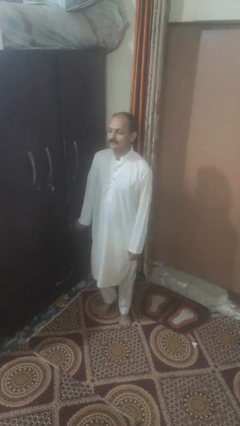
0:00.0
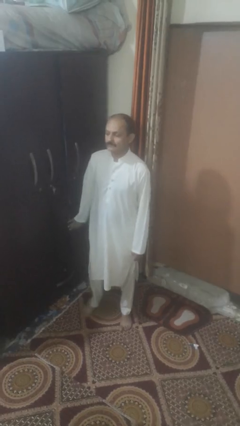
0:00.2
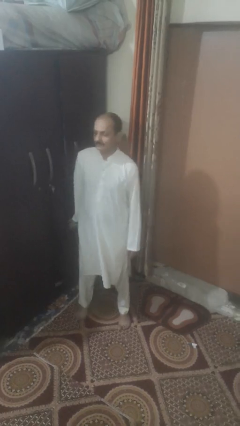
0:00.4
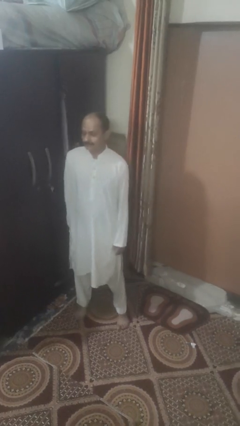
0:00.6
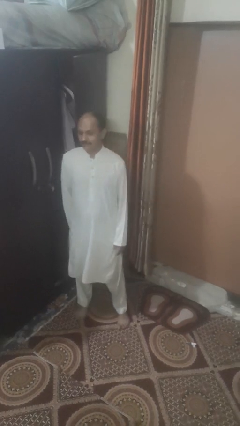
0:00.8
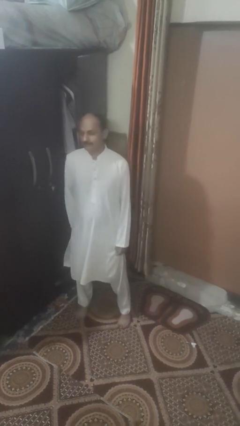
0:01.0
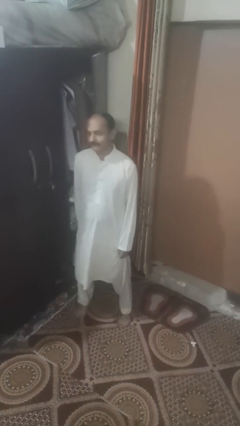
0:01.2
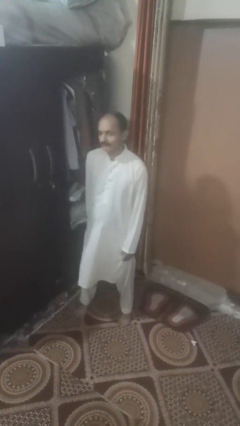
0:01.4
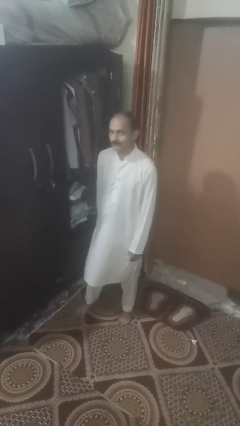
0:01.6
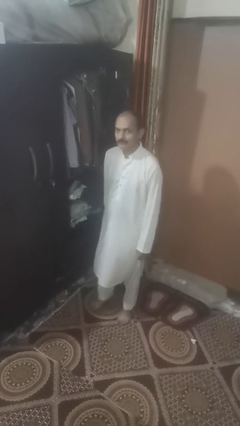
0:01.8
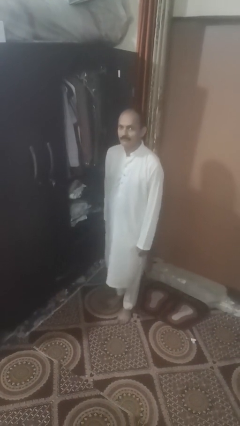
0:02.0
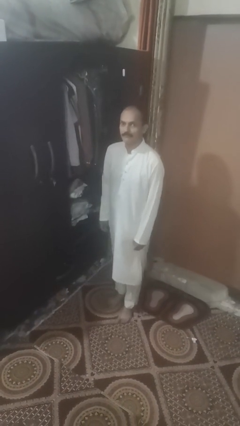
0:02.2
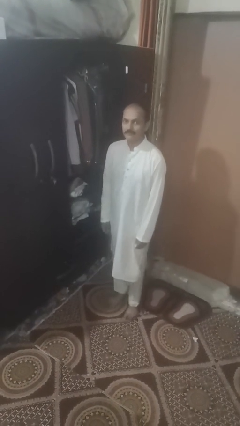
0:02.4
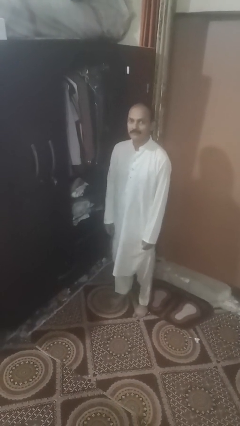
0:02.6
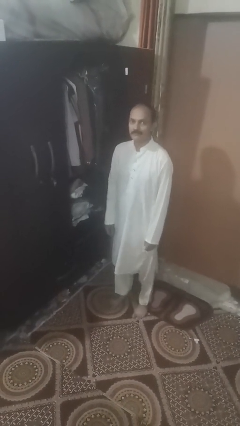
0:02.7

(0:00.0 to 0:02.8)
person opens facility door

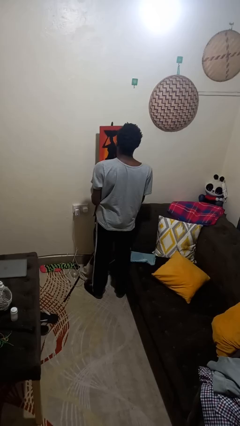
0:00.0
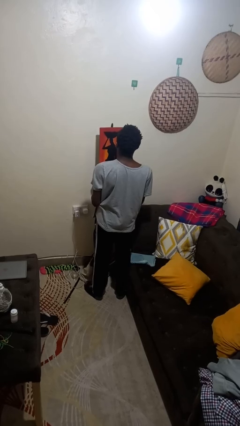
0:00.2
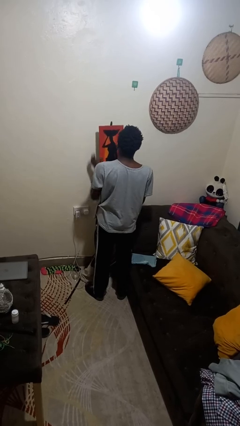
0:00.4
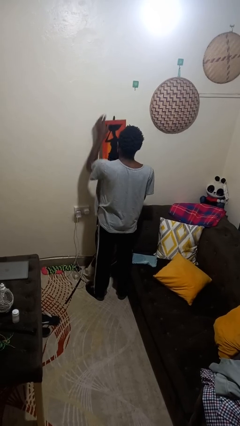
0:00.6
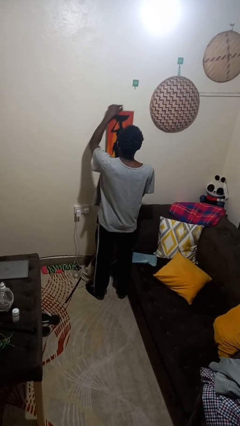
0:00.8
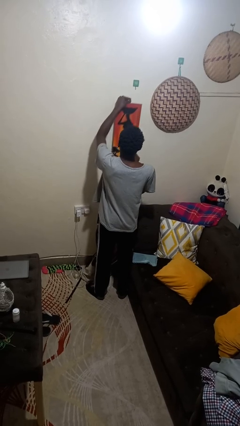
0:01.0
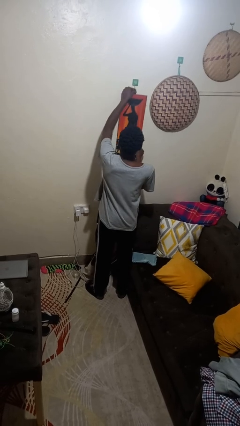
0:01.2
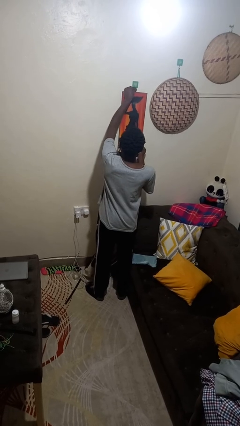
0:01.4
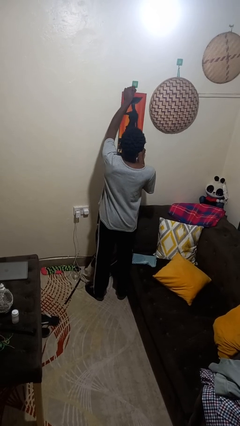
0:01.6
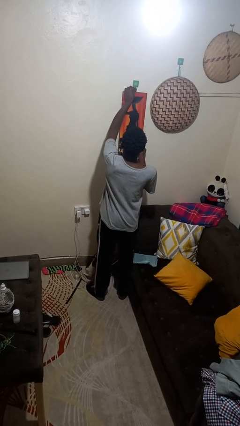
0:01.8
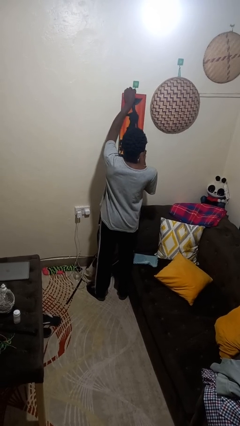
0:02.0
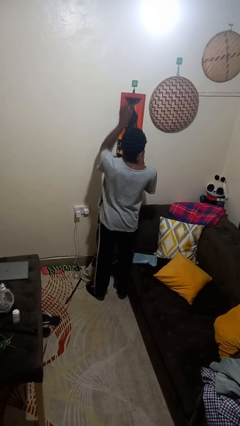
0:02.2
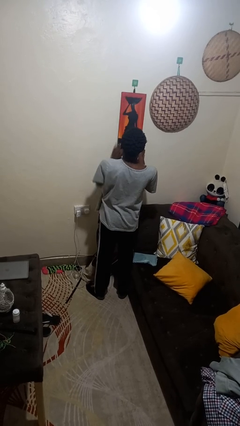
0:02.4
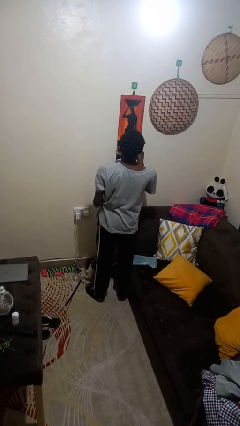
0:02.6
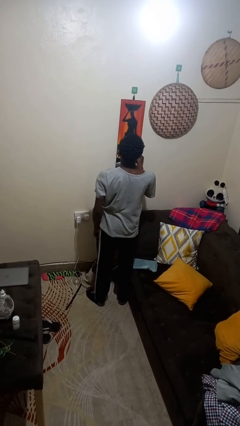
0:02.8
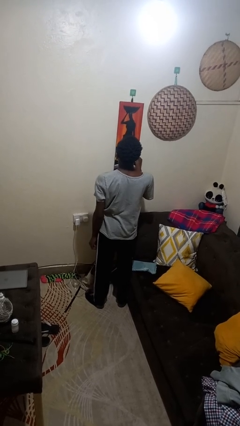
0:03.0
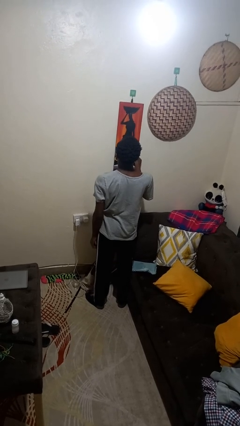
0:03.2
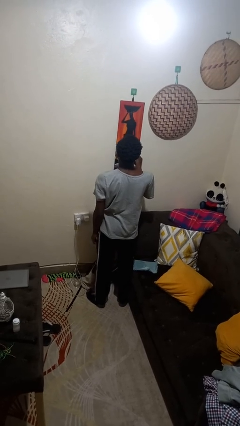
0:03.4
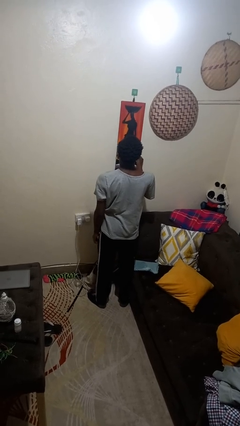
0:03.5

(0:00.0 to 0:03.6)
person puts up picture frame

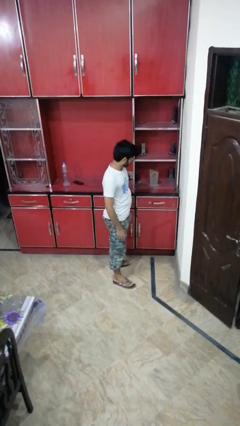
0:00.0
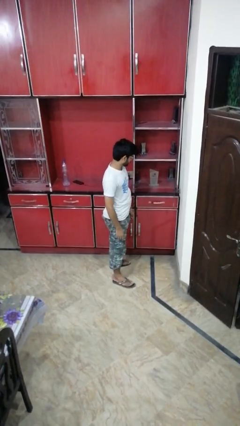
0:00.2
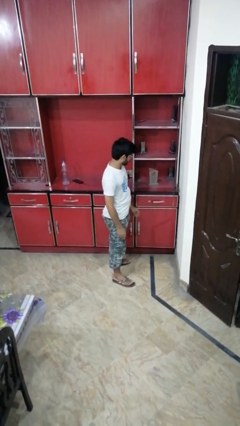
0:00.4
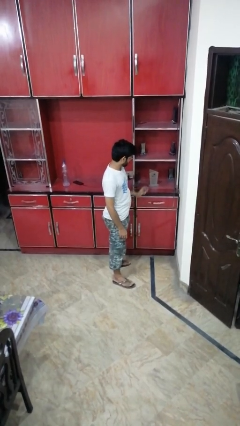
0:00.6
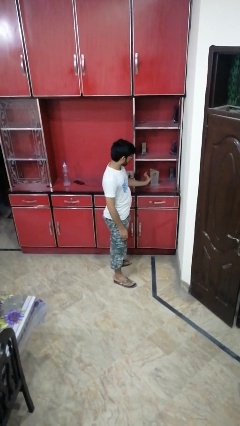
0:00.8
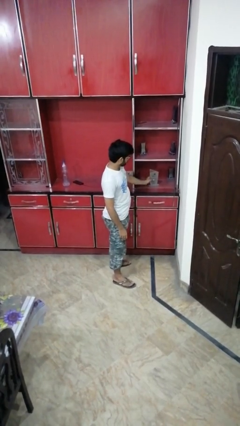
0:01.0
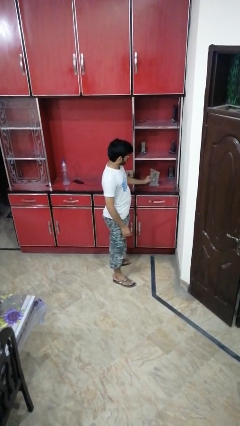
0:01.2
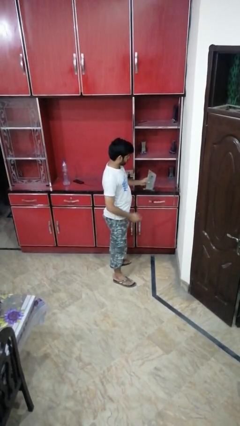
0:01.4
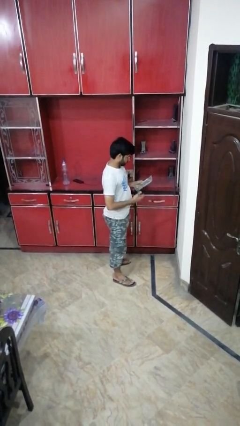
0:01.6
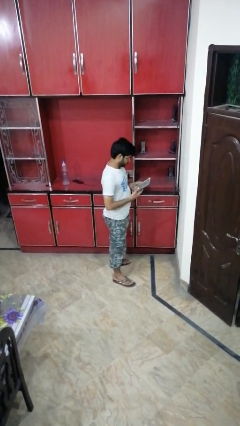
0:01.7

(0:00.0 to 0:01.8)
person picks up object from cabinet

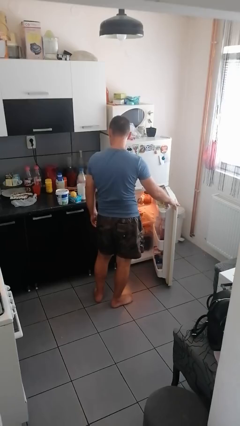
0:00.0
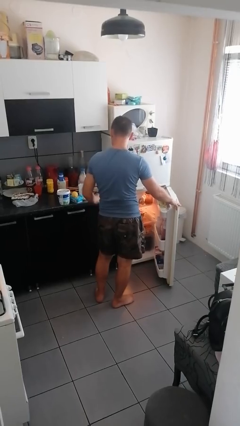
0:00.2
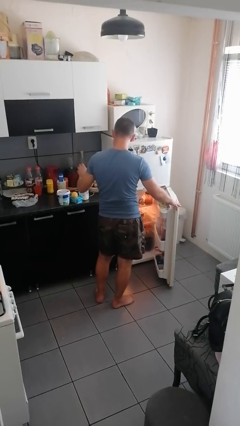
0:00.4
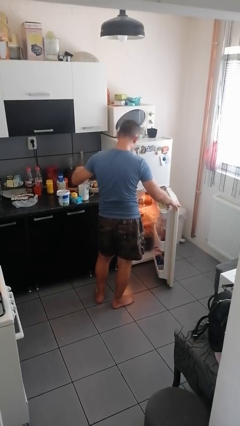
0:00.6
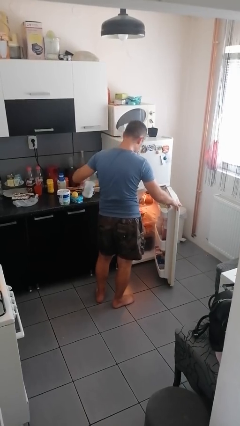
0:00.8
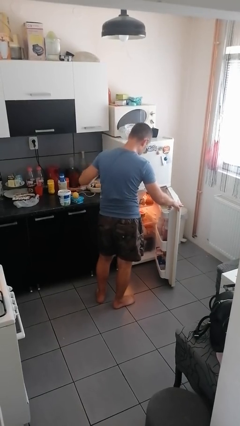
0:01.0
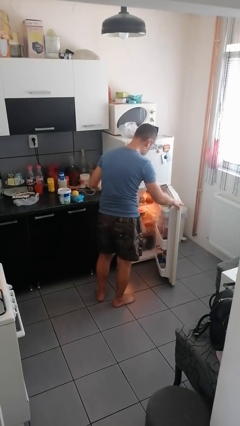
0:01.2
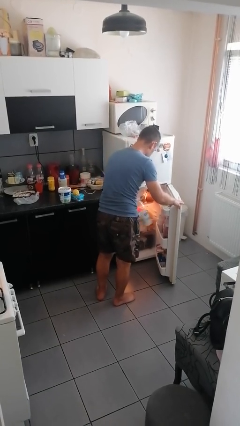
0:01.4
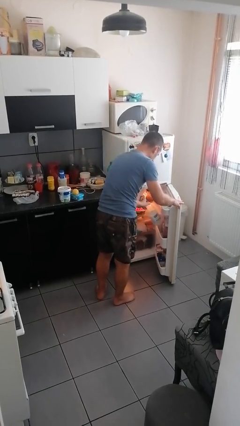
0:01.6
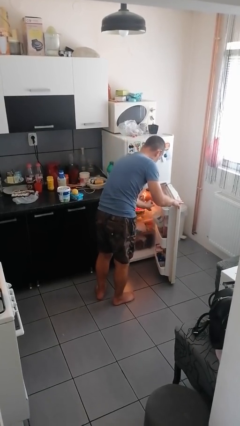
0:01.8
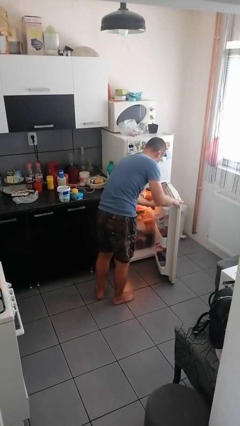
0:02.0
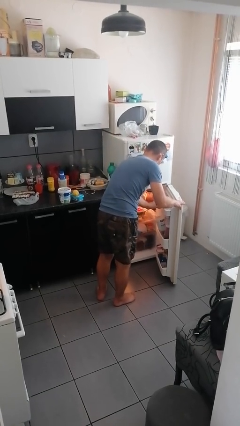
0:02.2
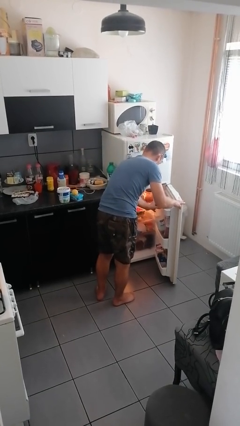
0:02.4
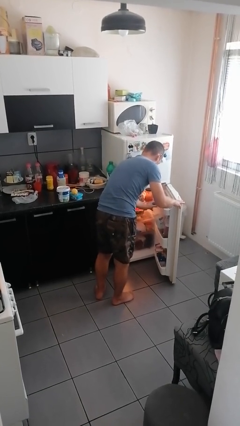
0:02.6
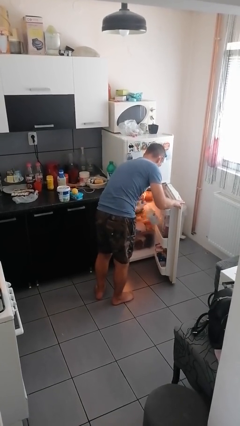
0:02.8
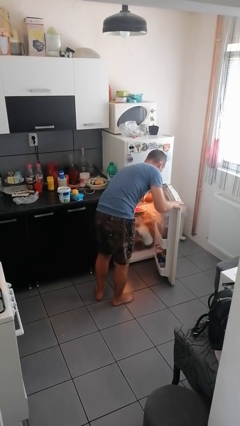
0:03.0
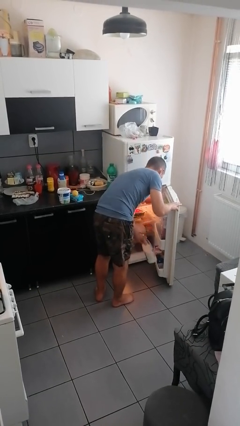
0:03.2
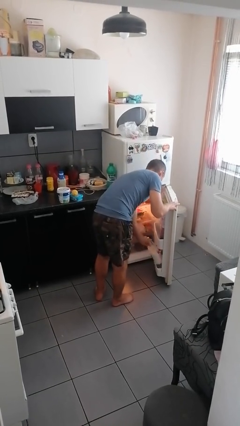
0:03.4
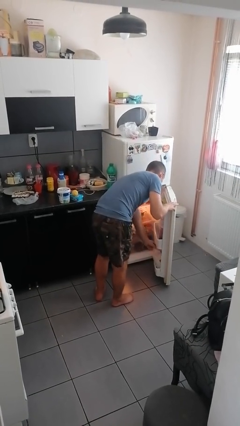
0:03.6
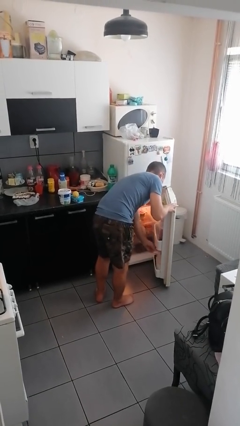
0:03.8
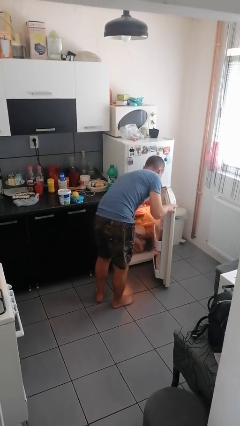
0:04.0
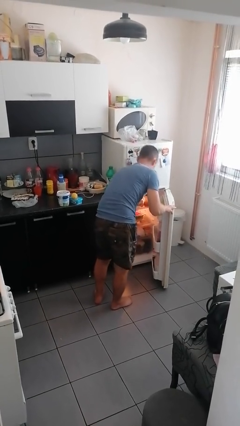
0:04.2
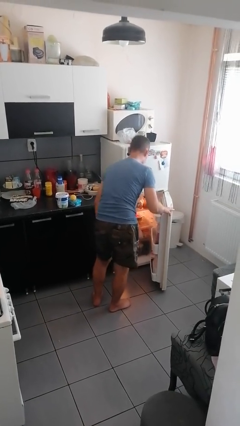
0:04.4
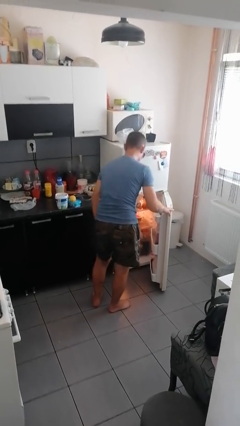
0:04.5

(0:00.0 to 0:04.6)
person loads groceries into refrigerator

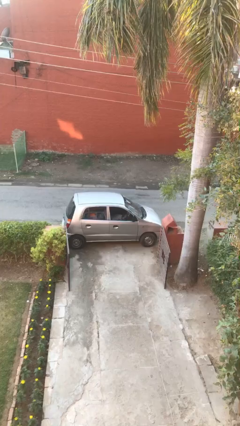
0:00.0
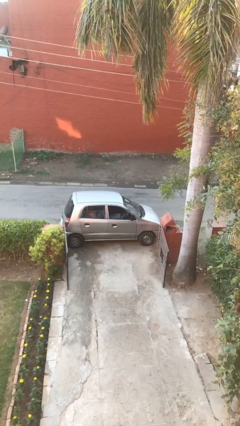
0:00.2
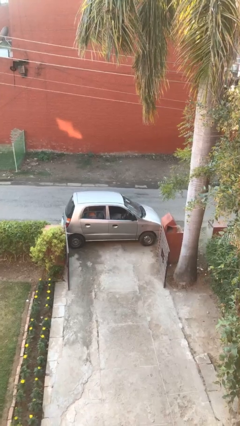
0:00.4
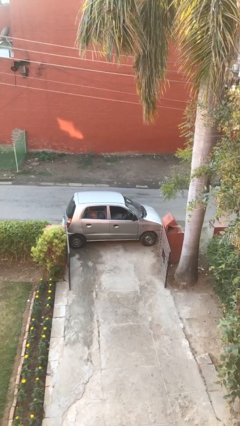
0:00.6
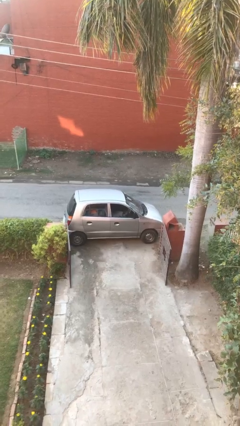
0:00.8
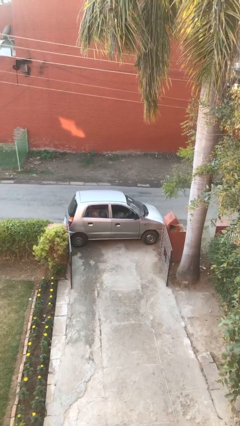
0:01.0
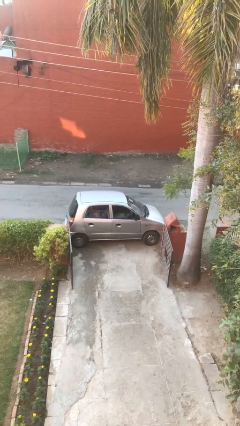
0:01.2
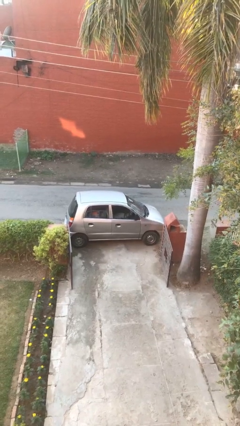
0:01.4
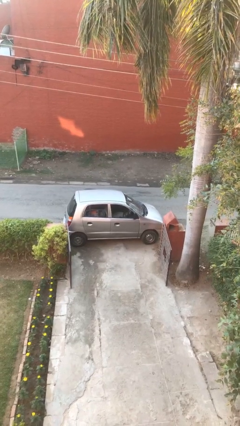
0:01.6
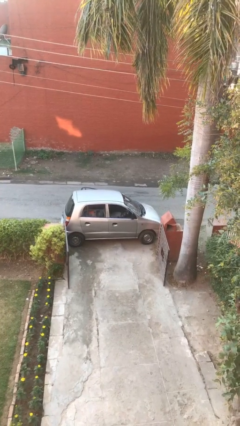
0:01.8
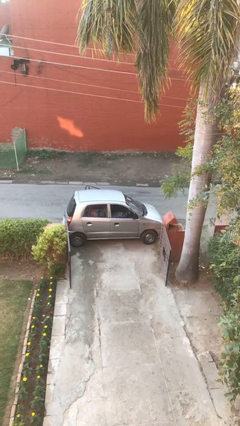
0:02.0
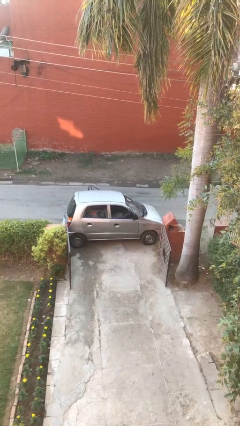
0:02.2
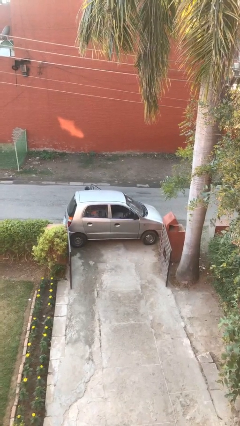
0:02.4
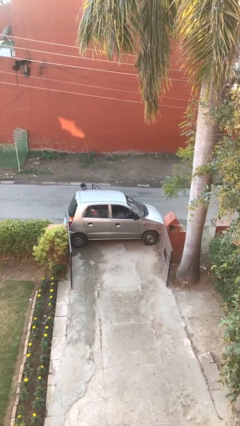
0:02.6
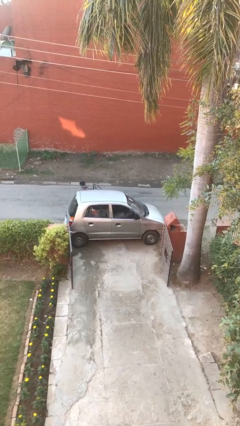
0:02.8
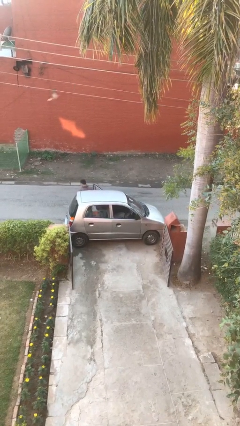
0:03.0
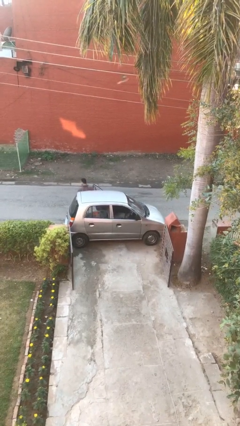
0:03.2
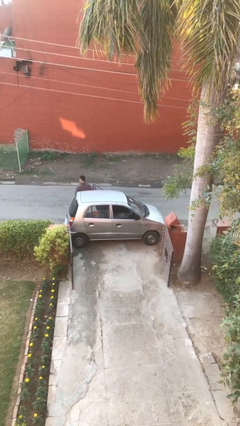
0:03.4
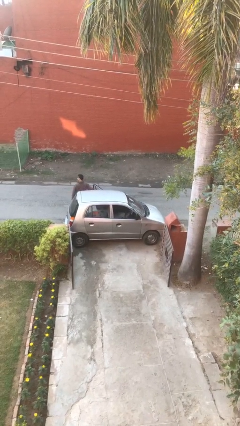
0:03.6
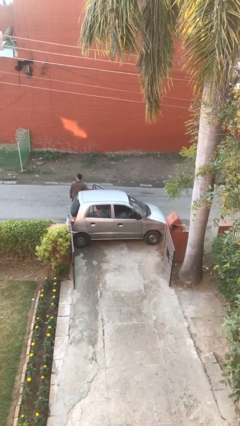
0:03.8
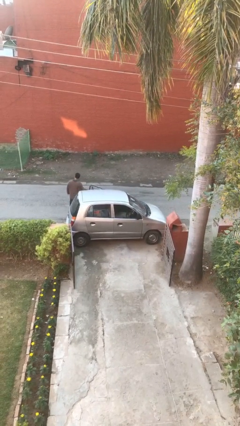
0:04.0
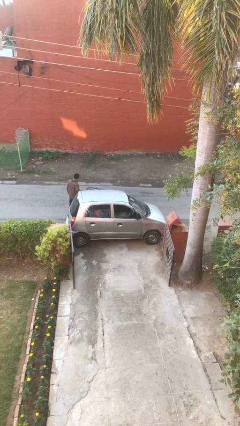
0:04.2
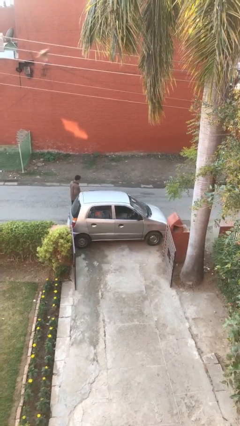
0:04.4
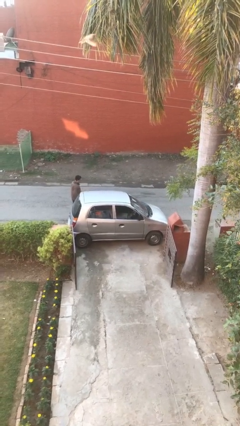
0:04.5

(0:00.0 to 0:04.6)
car drops off person
